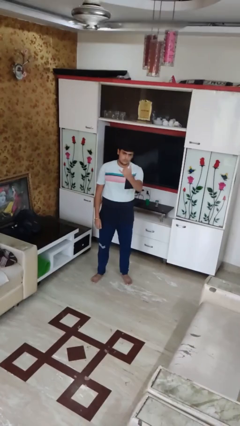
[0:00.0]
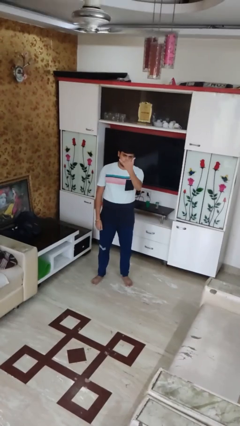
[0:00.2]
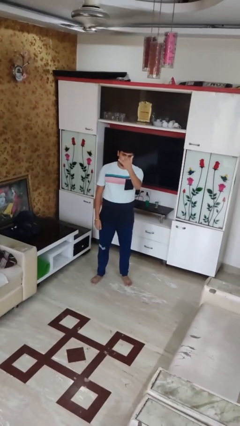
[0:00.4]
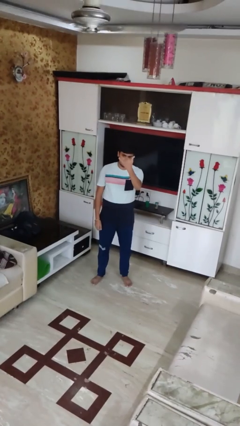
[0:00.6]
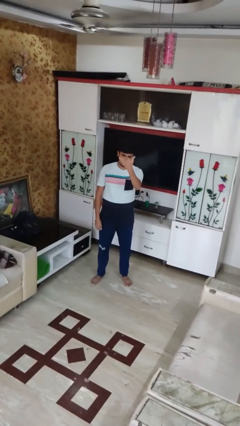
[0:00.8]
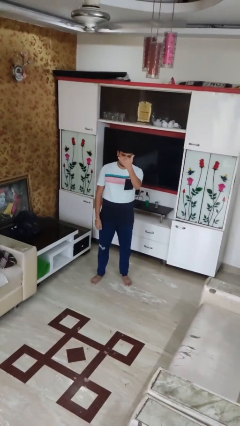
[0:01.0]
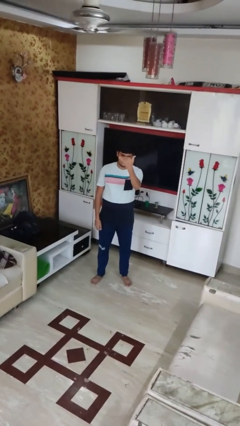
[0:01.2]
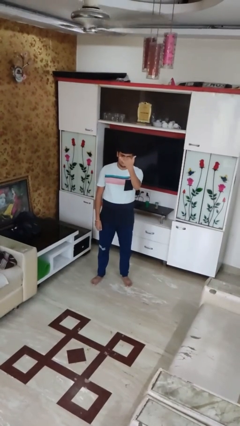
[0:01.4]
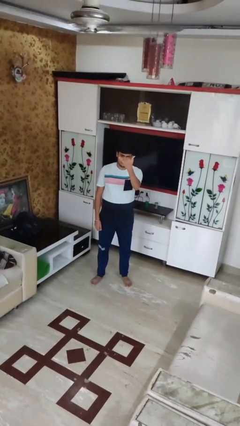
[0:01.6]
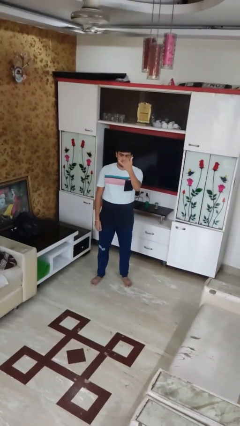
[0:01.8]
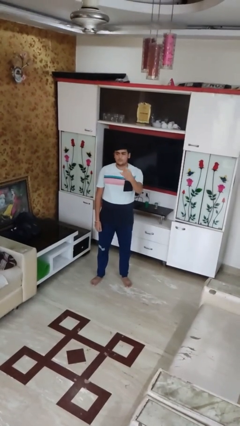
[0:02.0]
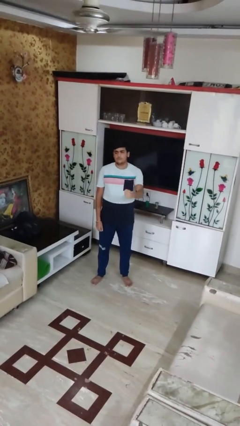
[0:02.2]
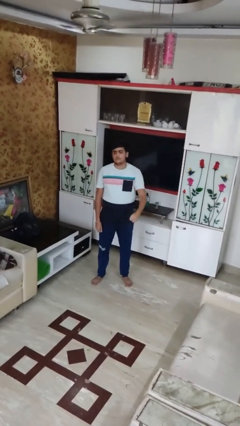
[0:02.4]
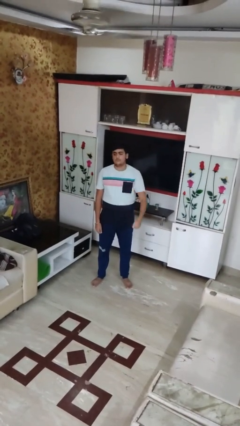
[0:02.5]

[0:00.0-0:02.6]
person gestures hang loose

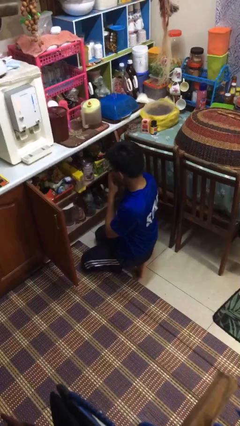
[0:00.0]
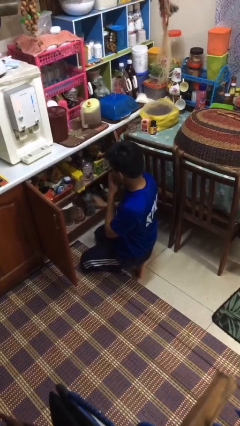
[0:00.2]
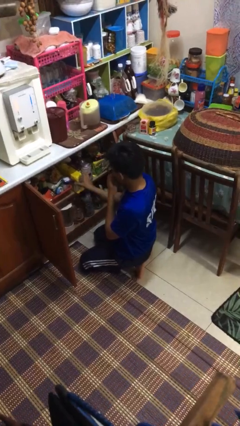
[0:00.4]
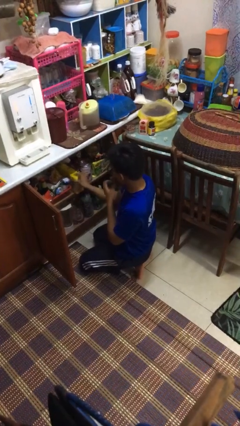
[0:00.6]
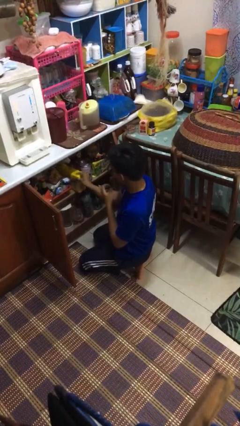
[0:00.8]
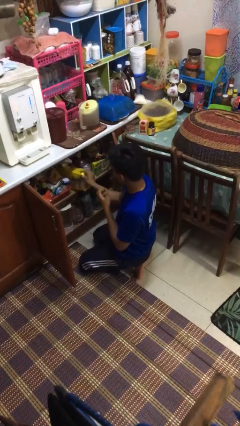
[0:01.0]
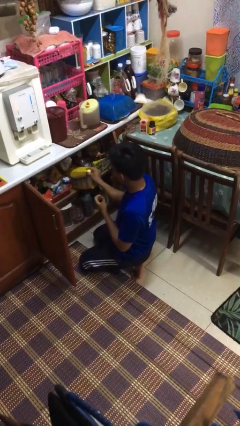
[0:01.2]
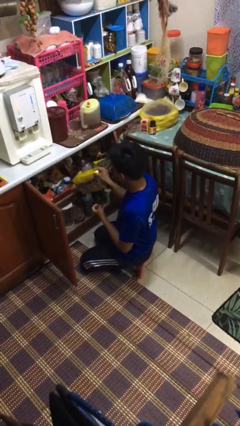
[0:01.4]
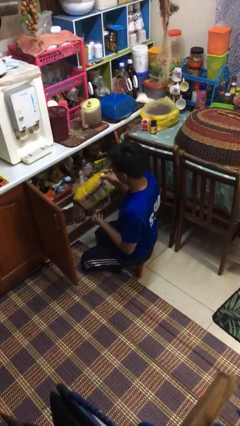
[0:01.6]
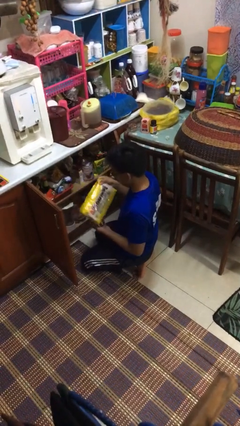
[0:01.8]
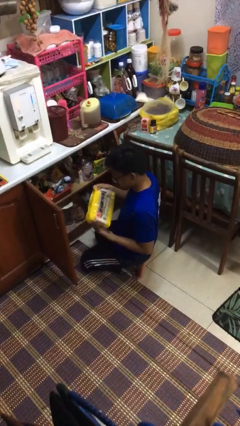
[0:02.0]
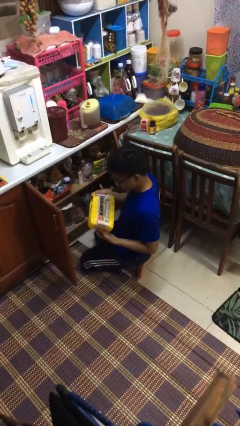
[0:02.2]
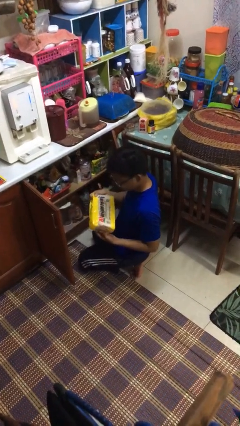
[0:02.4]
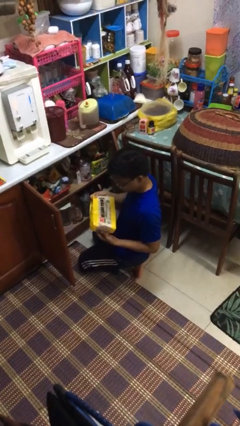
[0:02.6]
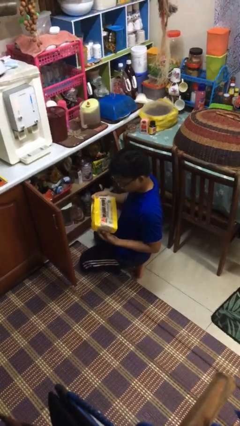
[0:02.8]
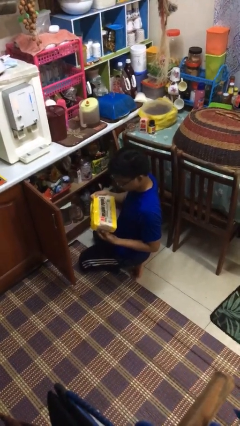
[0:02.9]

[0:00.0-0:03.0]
person takes object from cabinet

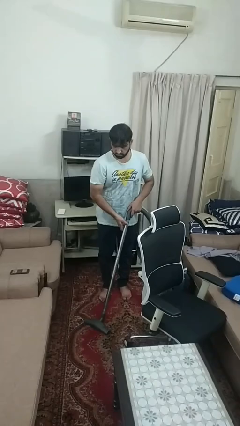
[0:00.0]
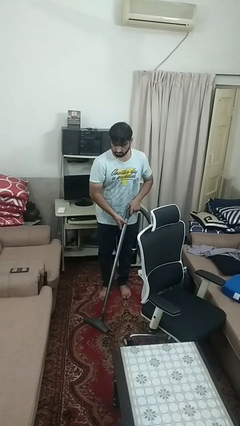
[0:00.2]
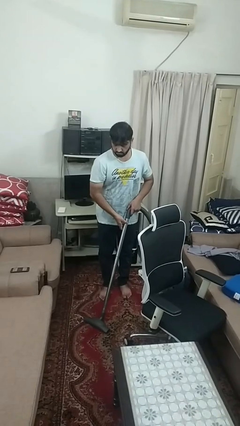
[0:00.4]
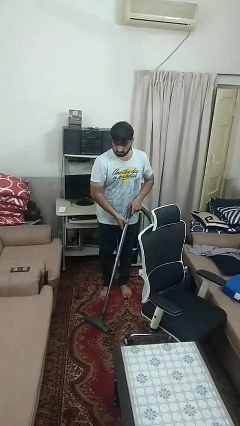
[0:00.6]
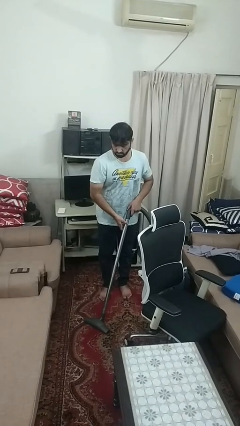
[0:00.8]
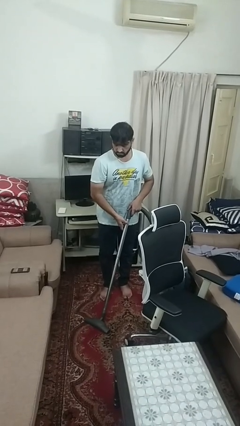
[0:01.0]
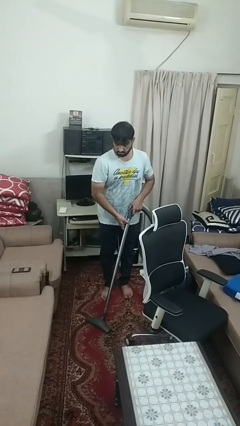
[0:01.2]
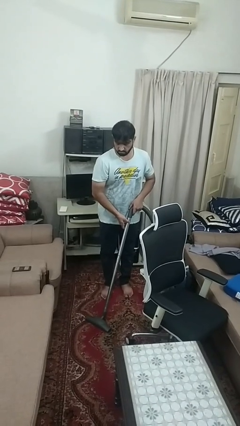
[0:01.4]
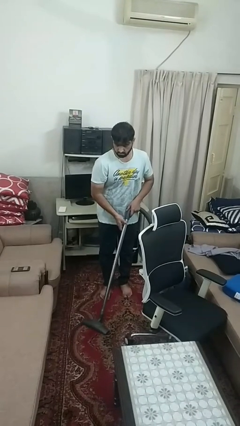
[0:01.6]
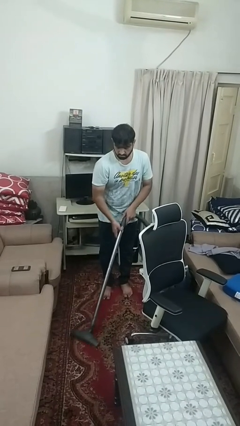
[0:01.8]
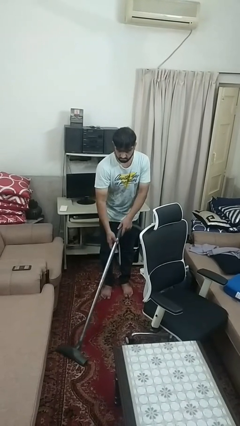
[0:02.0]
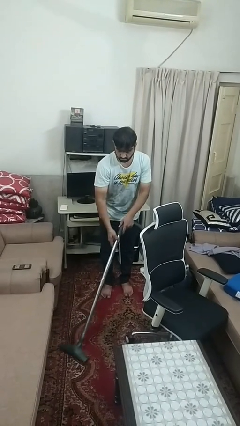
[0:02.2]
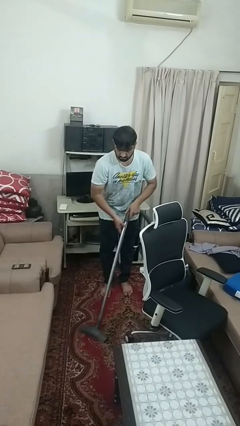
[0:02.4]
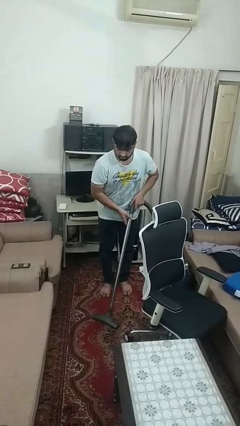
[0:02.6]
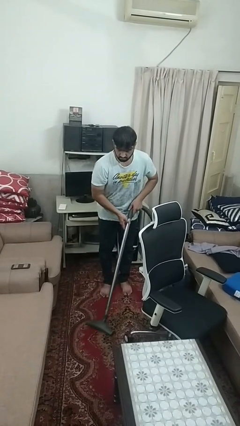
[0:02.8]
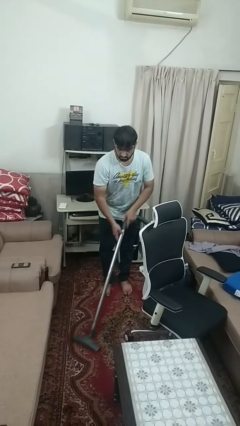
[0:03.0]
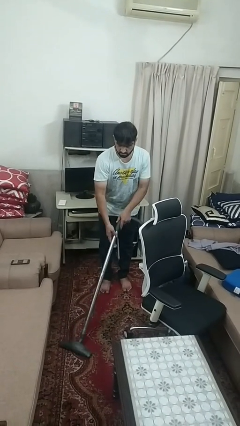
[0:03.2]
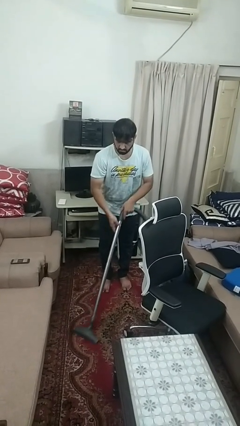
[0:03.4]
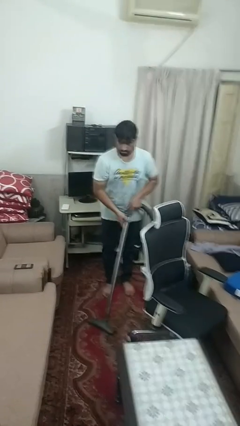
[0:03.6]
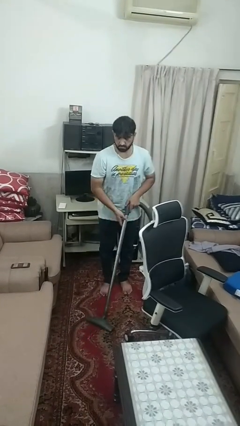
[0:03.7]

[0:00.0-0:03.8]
person vacuums carpet

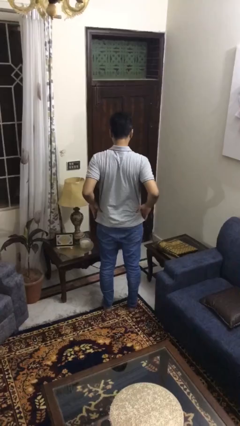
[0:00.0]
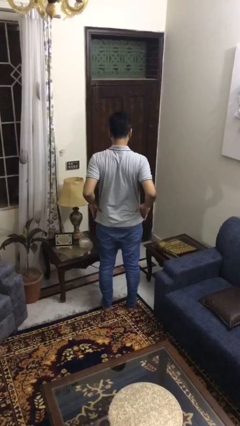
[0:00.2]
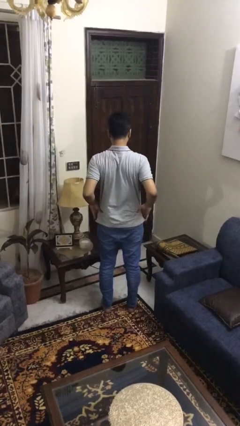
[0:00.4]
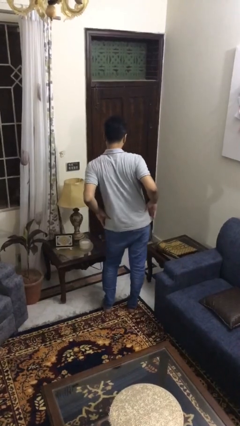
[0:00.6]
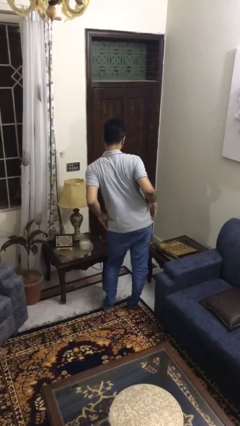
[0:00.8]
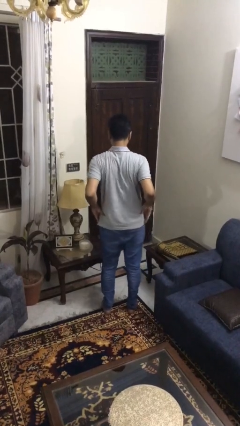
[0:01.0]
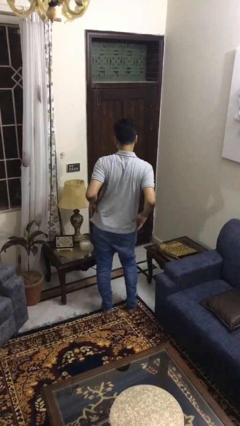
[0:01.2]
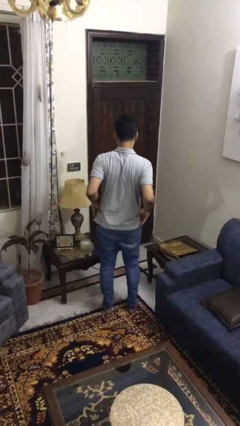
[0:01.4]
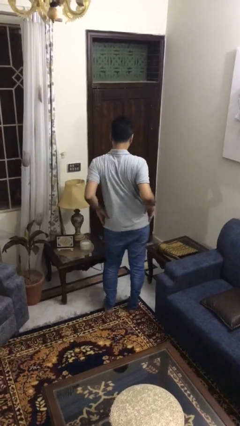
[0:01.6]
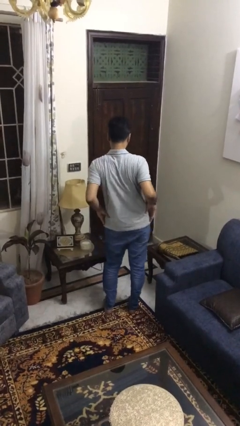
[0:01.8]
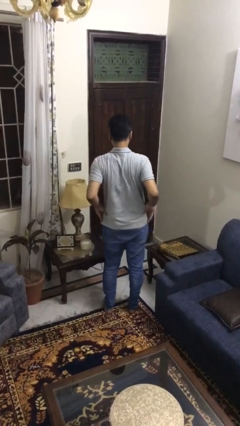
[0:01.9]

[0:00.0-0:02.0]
person wiggles hips

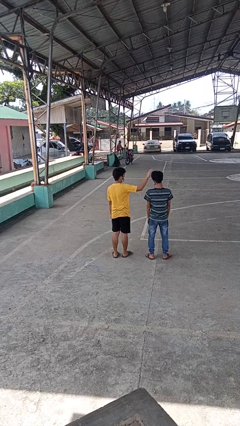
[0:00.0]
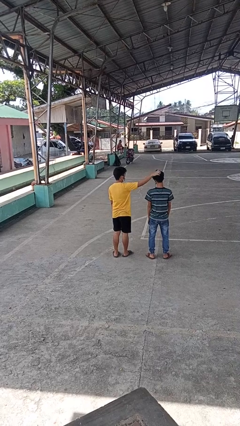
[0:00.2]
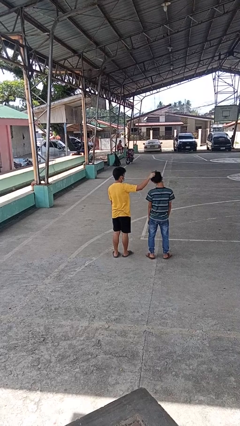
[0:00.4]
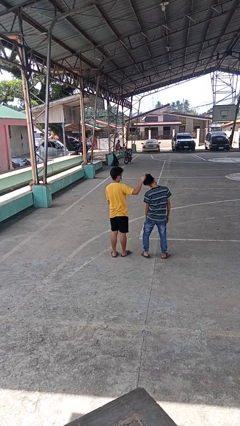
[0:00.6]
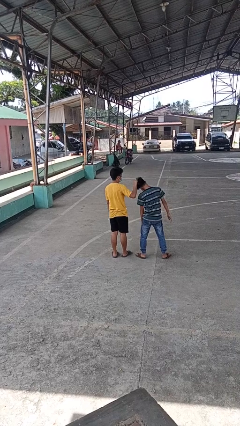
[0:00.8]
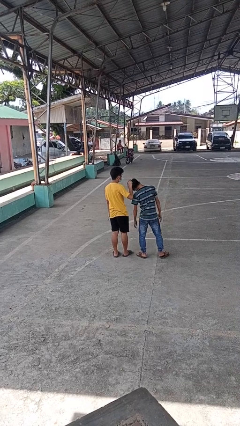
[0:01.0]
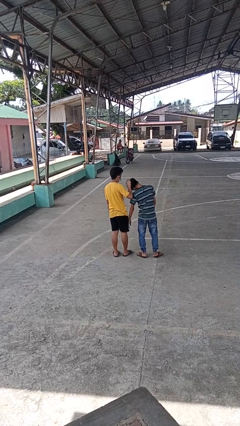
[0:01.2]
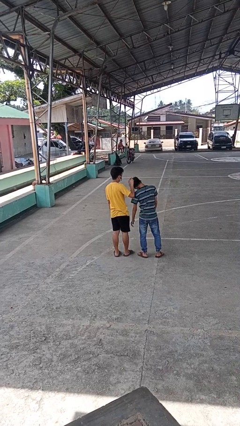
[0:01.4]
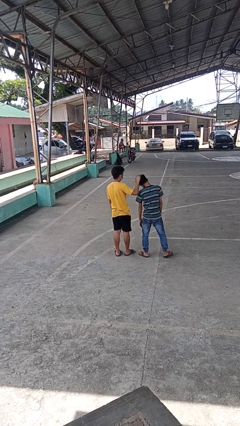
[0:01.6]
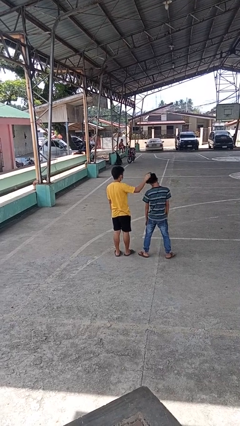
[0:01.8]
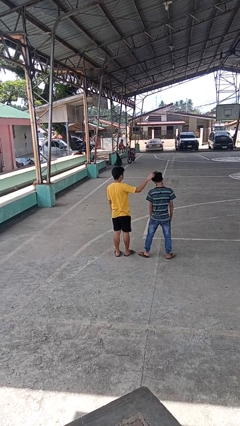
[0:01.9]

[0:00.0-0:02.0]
person grabs person by hair

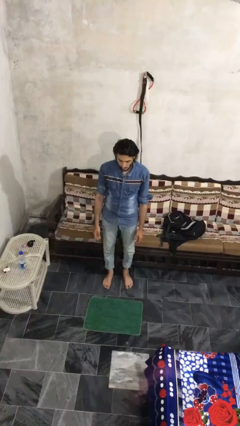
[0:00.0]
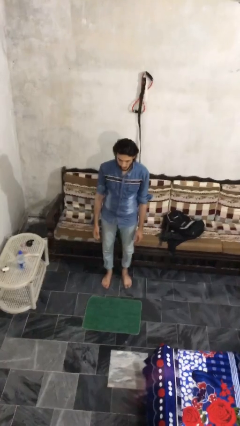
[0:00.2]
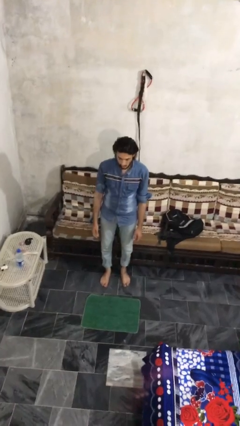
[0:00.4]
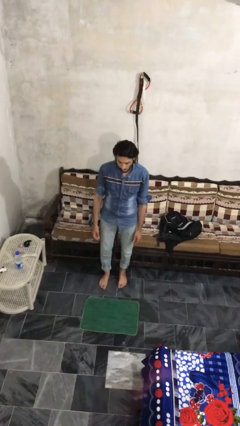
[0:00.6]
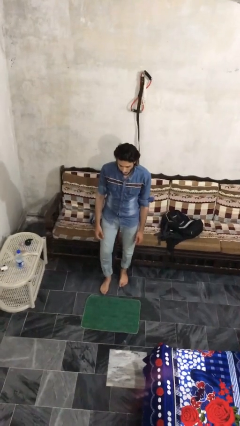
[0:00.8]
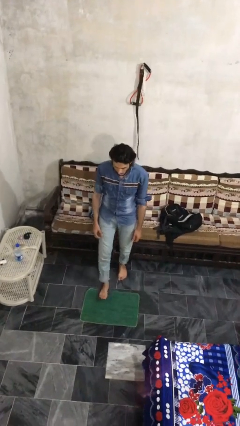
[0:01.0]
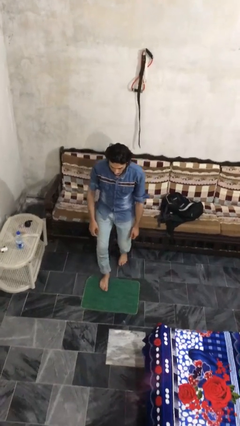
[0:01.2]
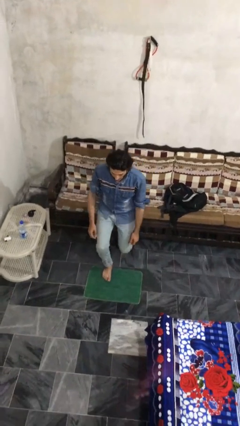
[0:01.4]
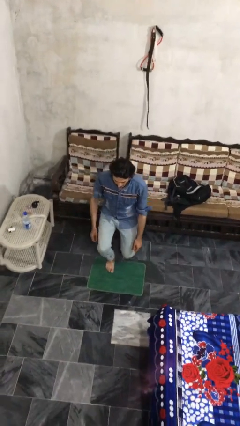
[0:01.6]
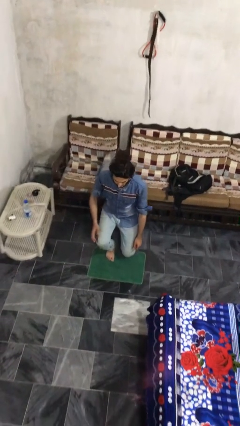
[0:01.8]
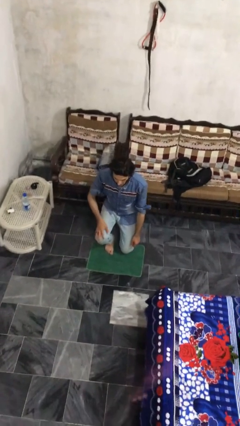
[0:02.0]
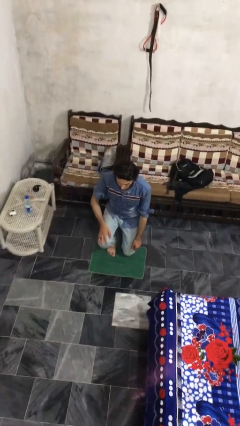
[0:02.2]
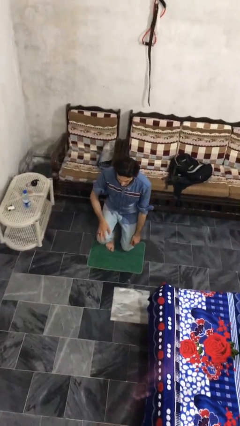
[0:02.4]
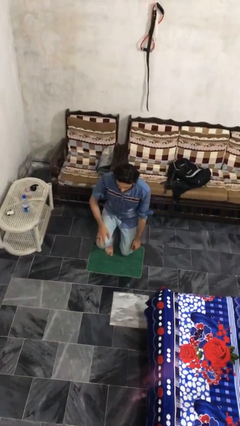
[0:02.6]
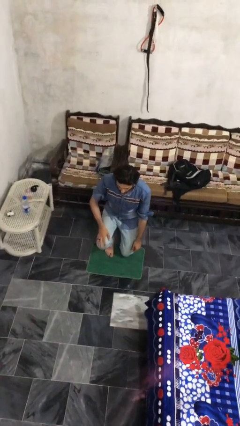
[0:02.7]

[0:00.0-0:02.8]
person kneels

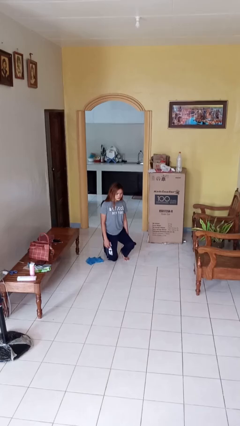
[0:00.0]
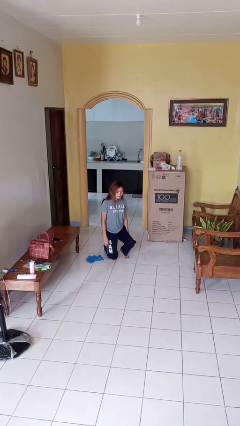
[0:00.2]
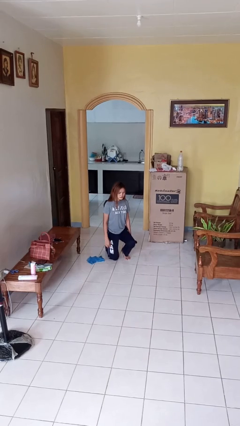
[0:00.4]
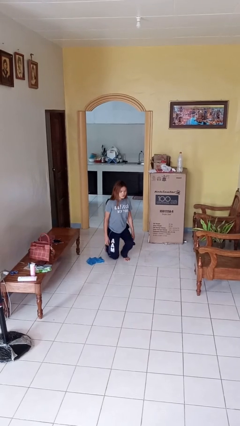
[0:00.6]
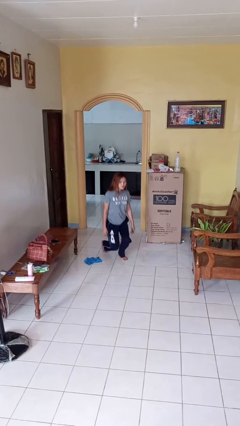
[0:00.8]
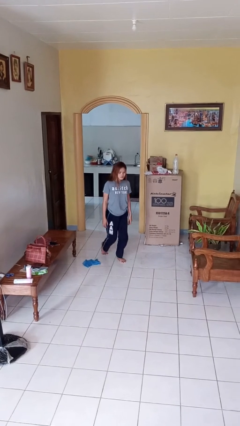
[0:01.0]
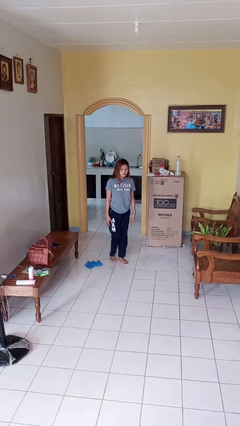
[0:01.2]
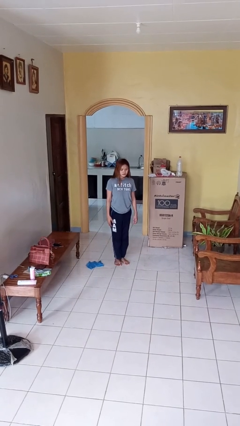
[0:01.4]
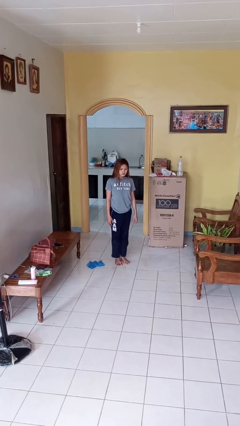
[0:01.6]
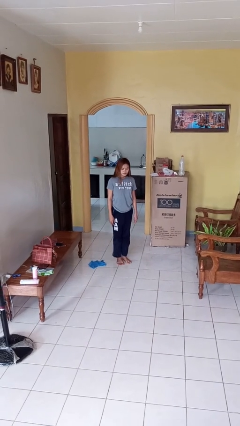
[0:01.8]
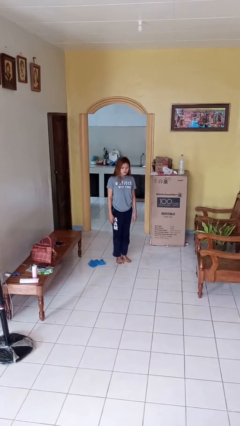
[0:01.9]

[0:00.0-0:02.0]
person stands up from floor
